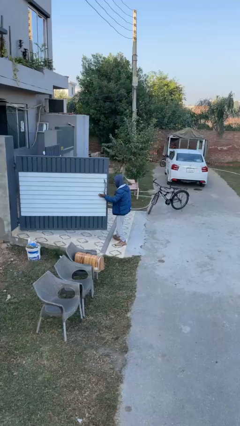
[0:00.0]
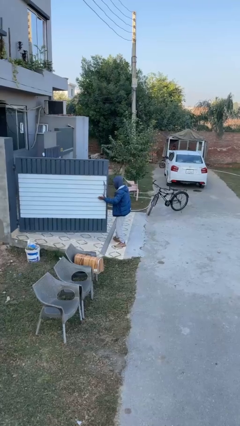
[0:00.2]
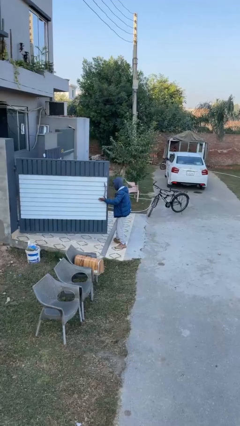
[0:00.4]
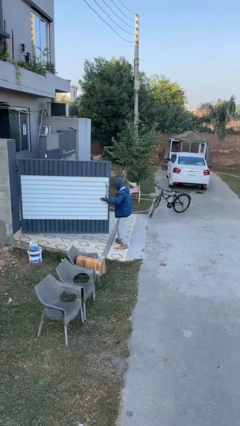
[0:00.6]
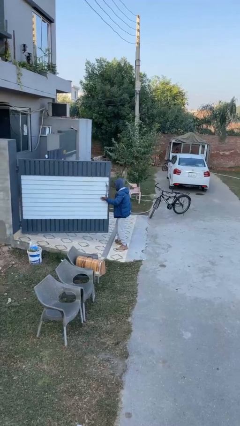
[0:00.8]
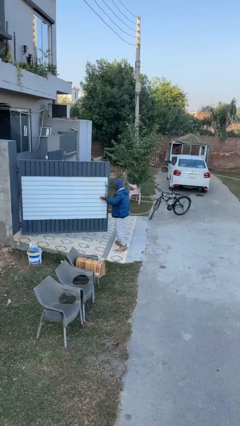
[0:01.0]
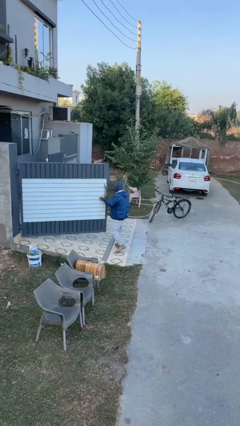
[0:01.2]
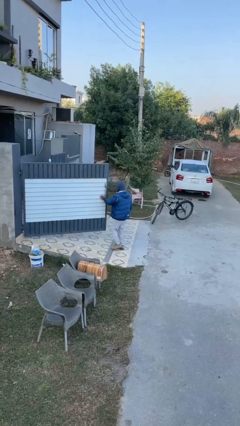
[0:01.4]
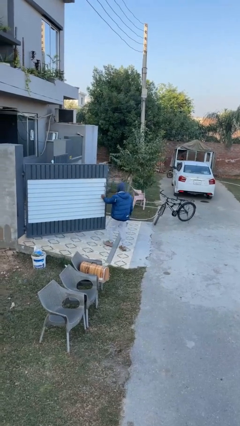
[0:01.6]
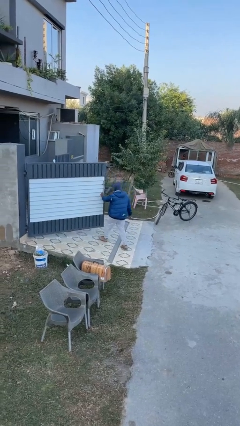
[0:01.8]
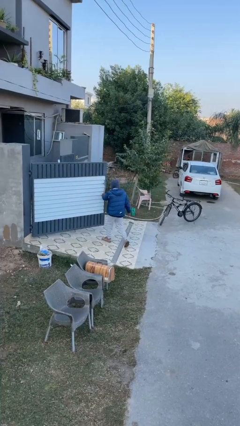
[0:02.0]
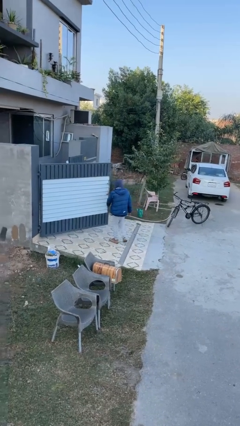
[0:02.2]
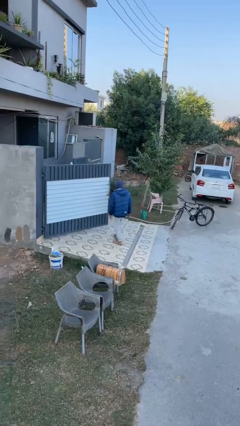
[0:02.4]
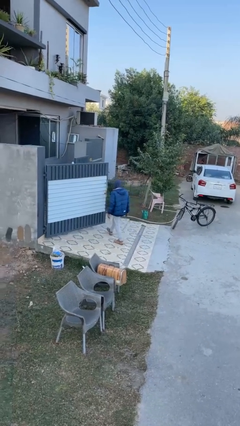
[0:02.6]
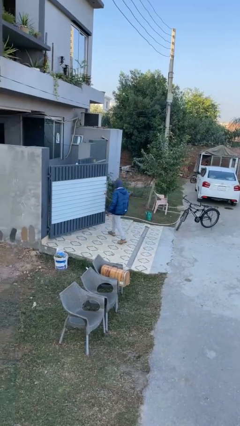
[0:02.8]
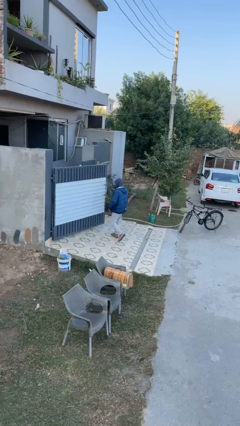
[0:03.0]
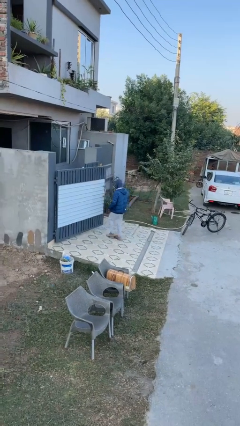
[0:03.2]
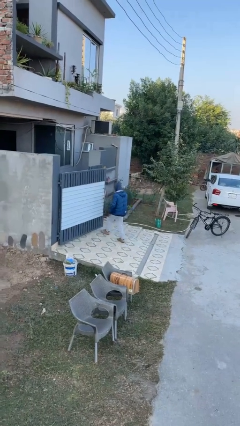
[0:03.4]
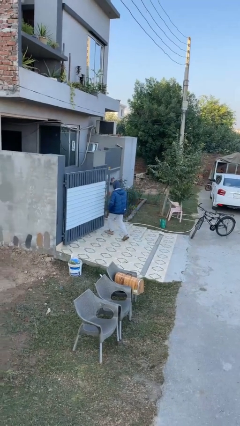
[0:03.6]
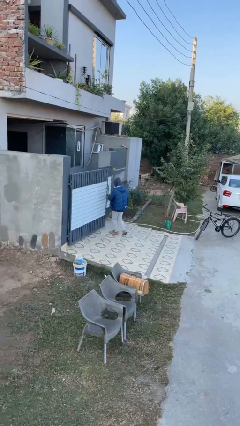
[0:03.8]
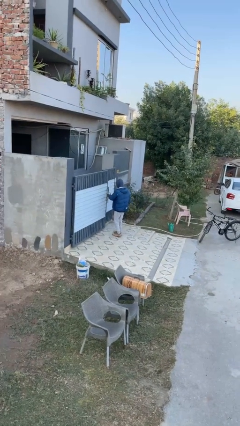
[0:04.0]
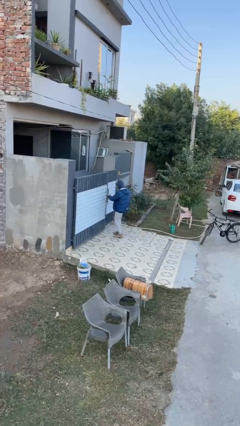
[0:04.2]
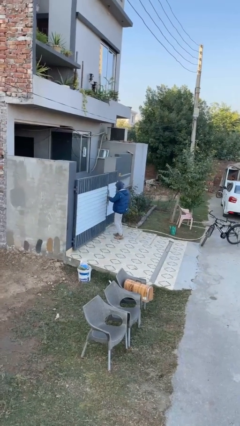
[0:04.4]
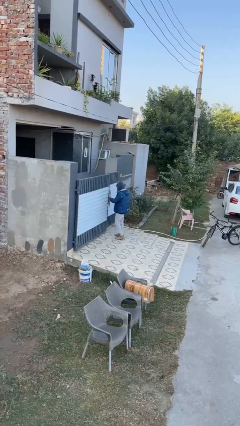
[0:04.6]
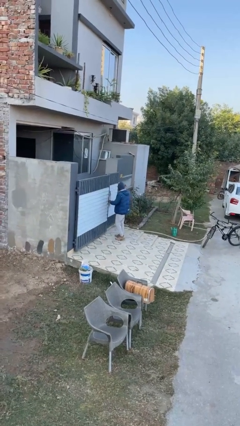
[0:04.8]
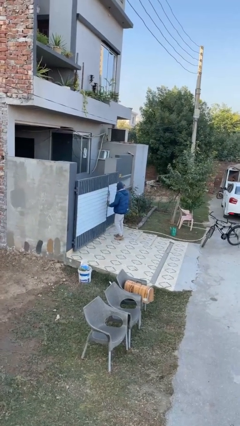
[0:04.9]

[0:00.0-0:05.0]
person closes facility door

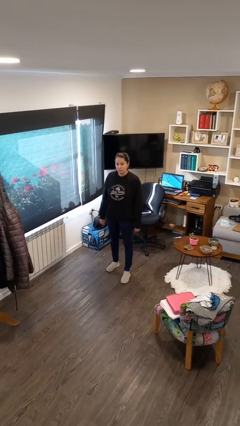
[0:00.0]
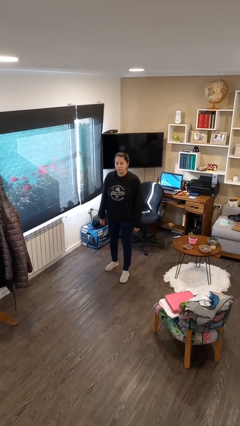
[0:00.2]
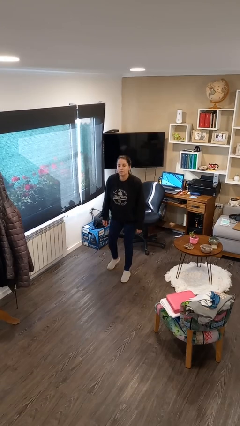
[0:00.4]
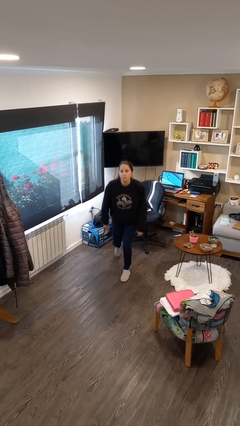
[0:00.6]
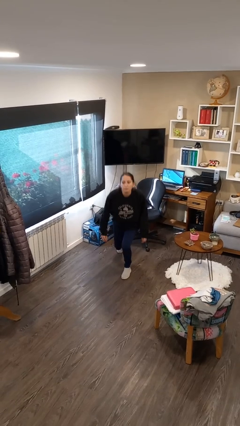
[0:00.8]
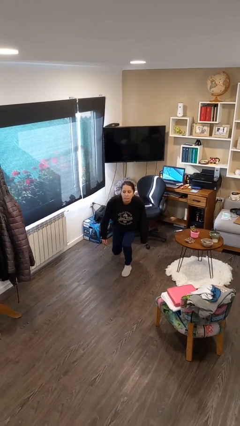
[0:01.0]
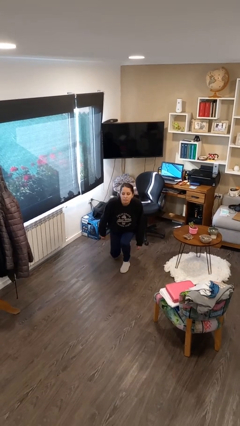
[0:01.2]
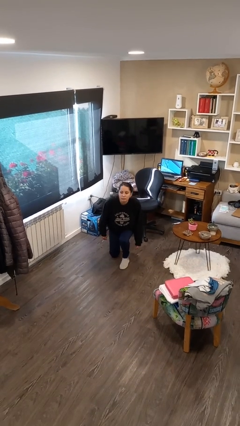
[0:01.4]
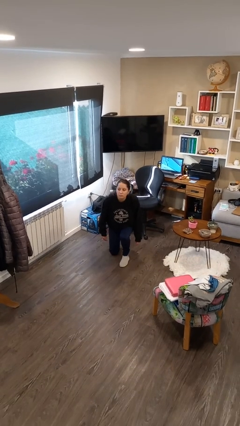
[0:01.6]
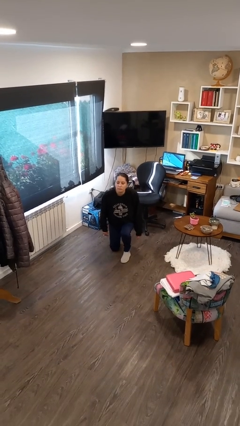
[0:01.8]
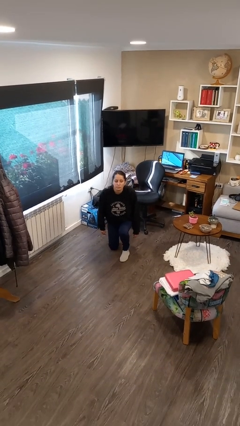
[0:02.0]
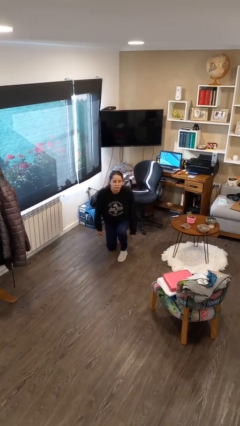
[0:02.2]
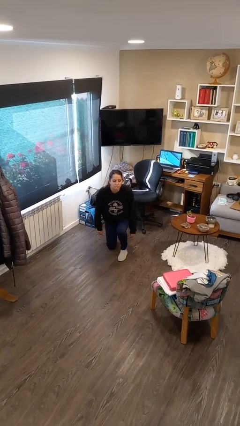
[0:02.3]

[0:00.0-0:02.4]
person kneels

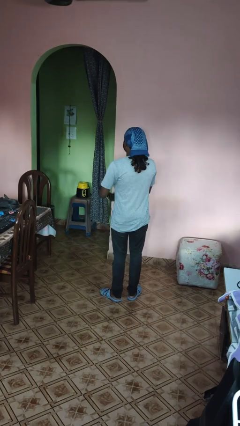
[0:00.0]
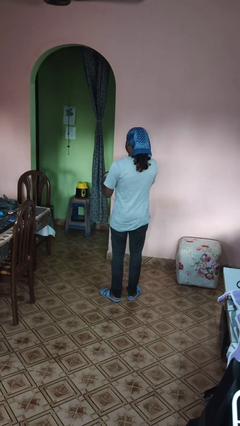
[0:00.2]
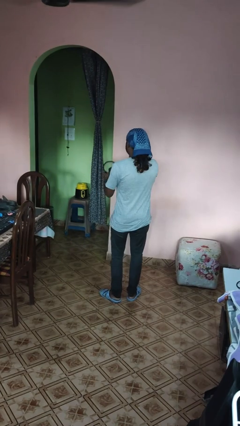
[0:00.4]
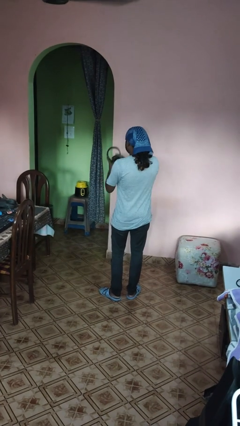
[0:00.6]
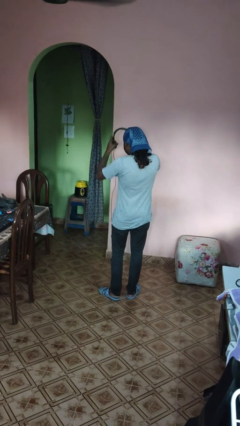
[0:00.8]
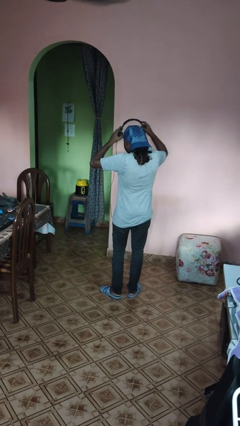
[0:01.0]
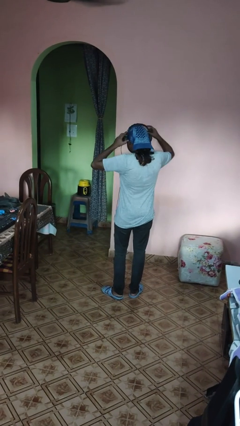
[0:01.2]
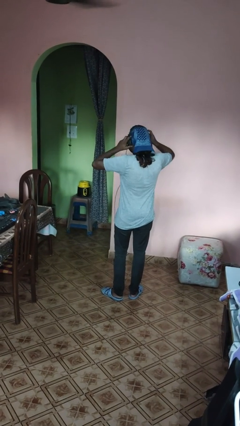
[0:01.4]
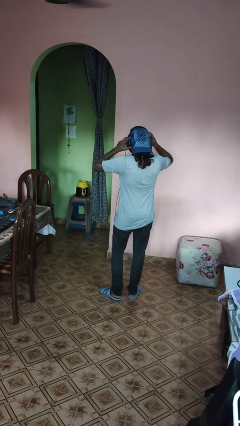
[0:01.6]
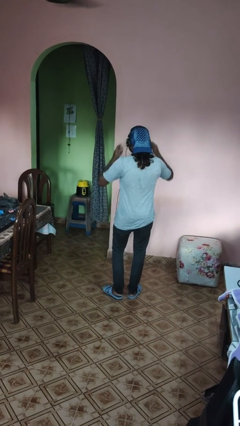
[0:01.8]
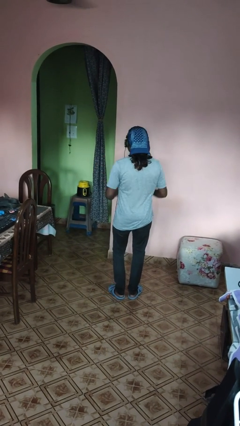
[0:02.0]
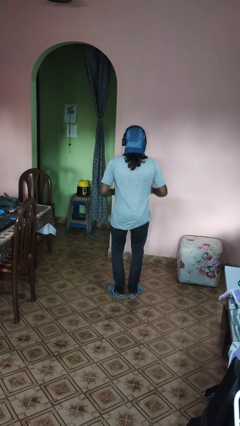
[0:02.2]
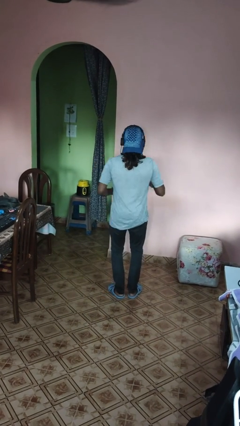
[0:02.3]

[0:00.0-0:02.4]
person puts on headphones

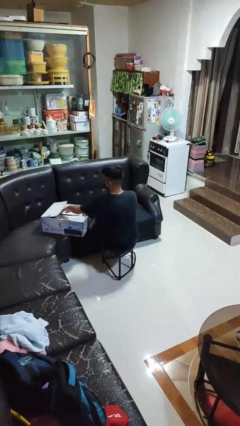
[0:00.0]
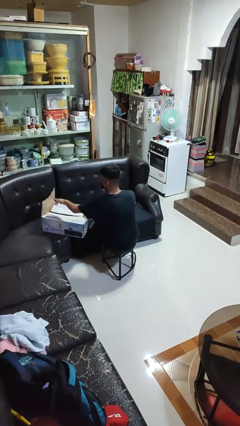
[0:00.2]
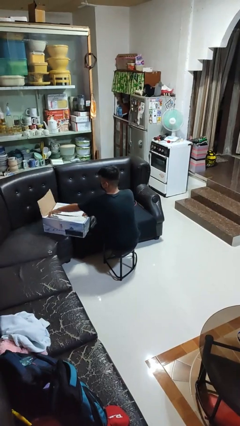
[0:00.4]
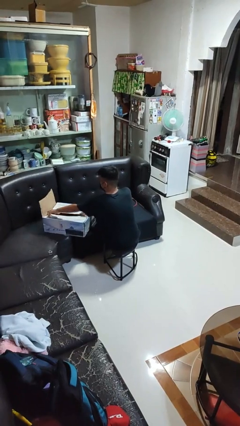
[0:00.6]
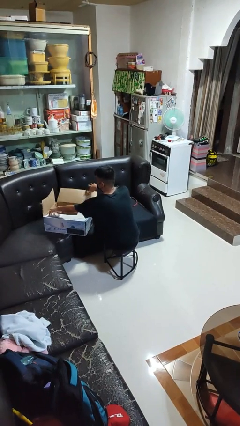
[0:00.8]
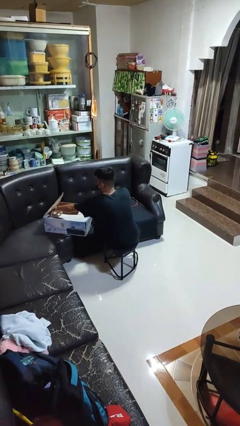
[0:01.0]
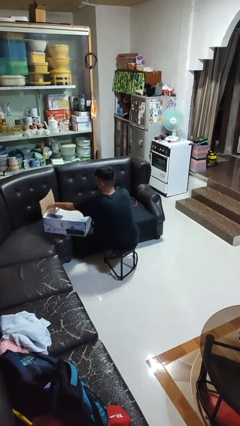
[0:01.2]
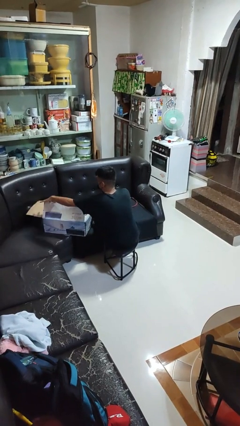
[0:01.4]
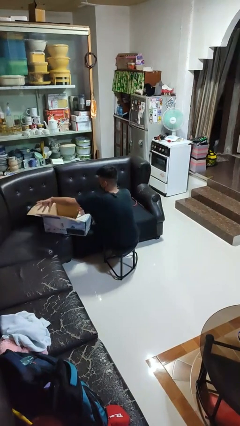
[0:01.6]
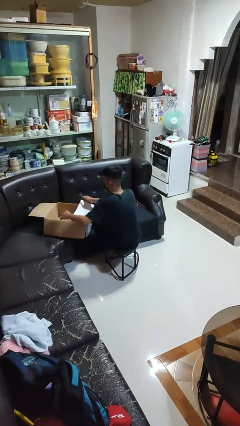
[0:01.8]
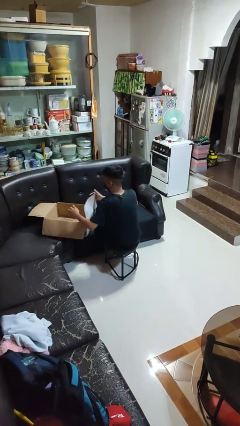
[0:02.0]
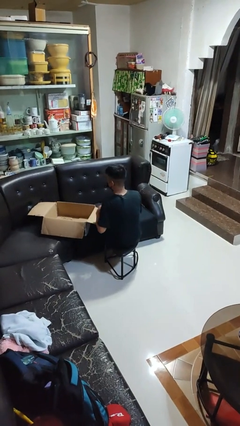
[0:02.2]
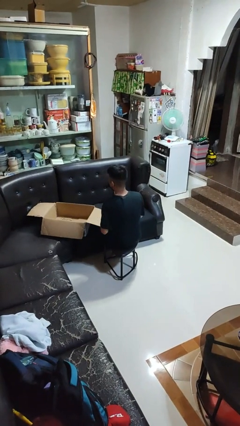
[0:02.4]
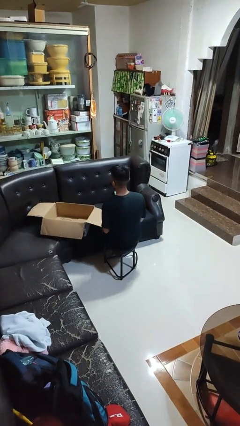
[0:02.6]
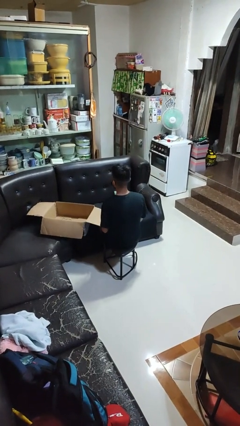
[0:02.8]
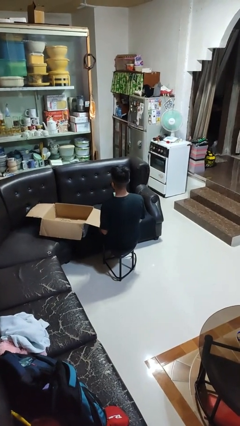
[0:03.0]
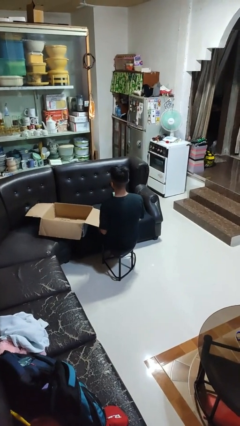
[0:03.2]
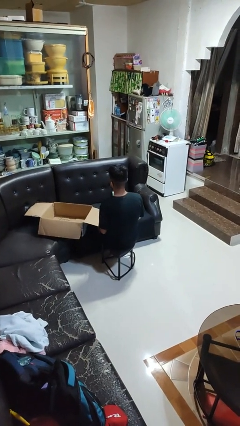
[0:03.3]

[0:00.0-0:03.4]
person opens box

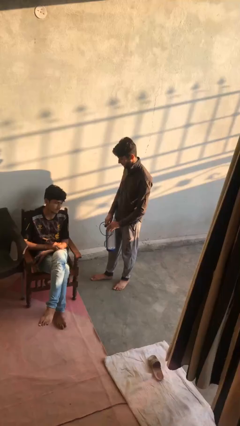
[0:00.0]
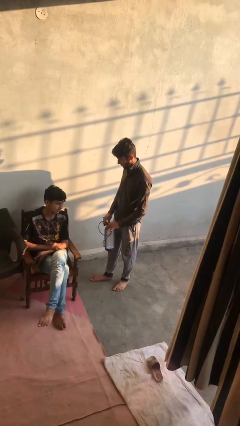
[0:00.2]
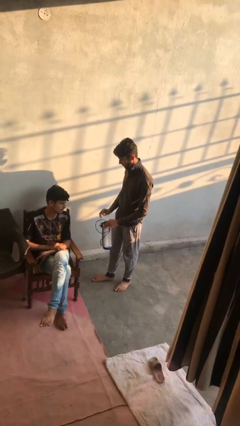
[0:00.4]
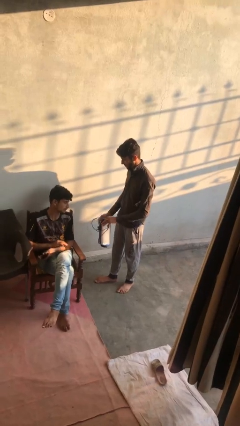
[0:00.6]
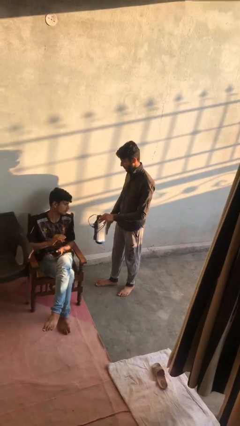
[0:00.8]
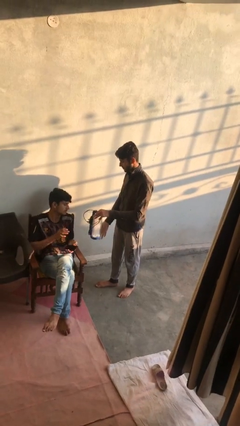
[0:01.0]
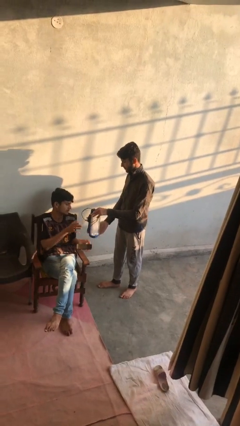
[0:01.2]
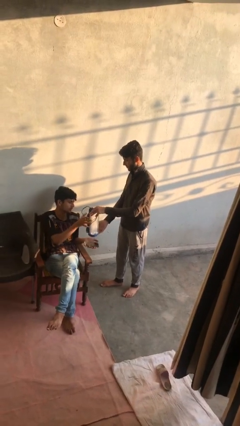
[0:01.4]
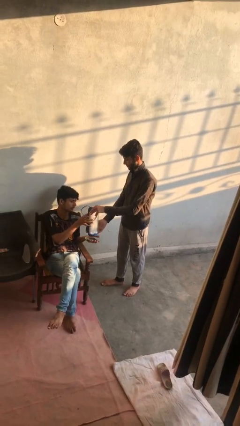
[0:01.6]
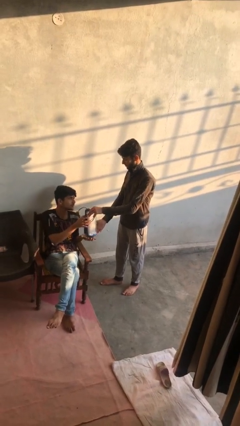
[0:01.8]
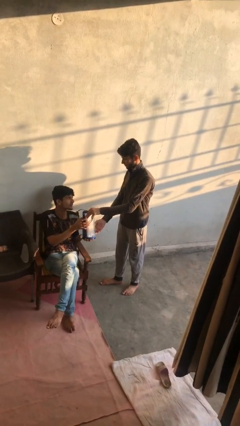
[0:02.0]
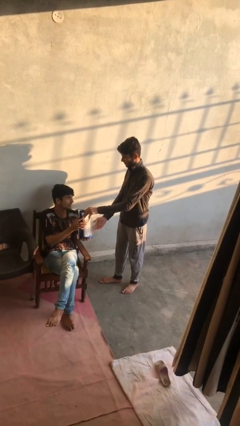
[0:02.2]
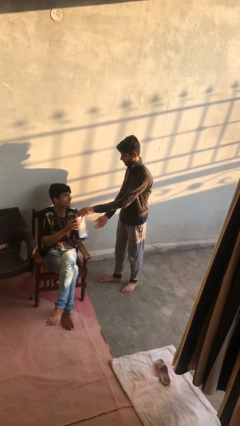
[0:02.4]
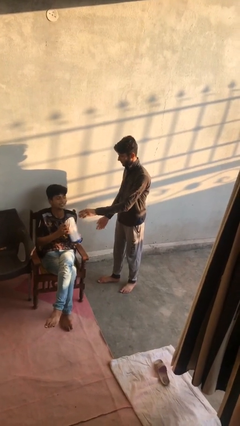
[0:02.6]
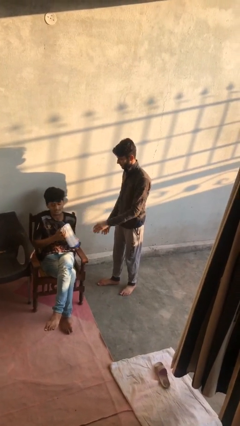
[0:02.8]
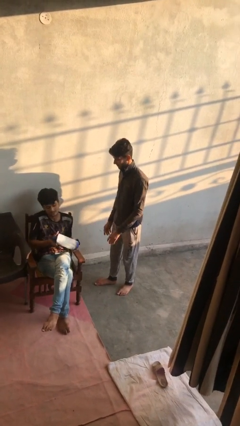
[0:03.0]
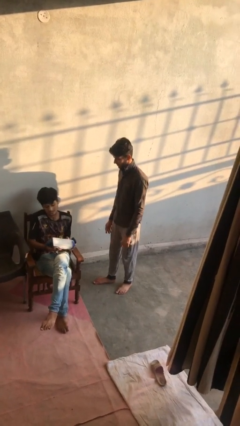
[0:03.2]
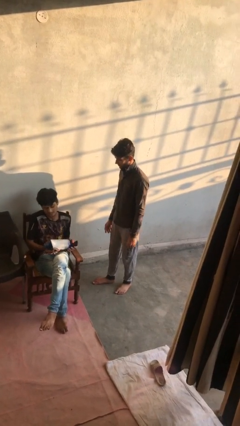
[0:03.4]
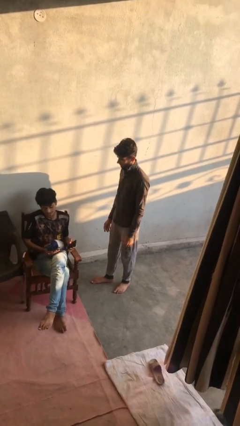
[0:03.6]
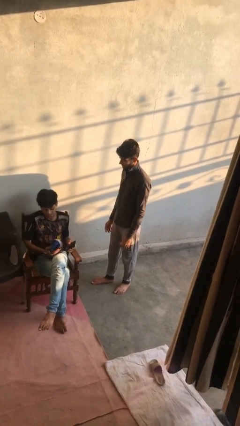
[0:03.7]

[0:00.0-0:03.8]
person transfers object to person

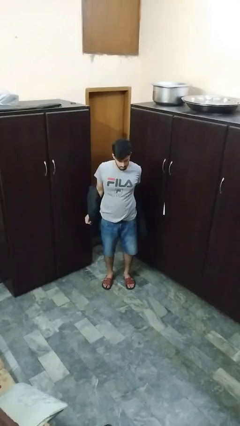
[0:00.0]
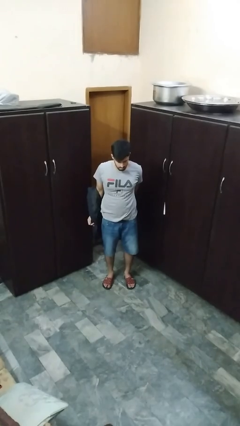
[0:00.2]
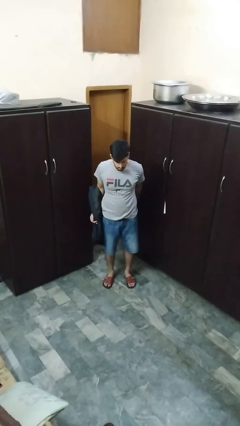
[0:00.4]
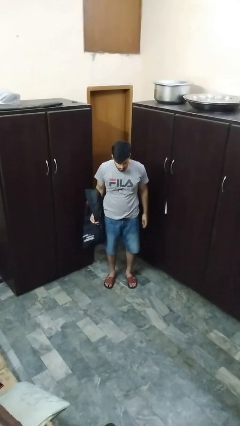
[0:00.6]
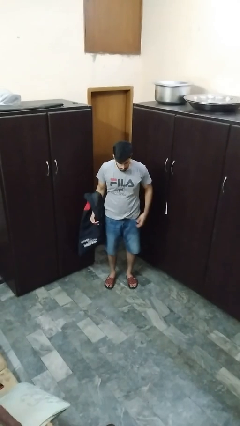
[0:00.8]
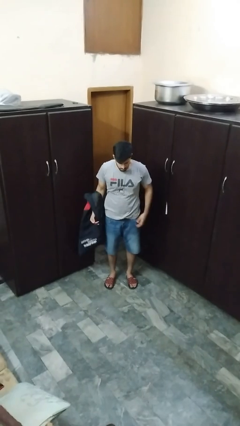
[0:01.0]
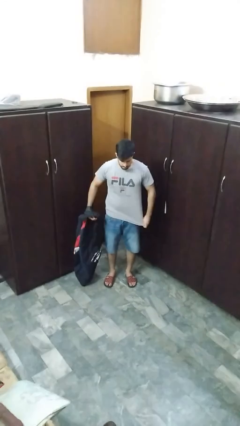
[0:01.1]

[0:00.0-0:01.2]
person takes off jacket
